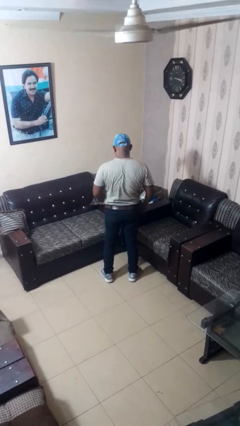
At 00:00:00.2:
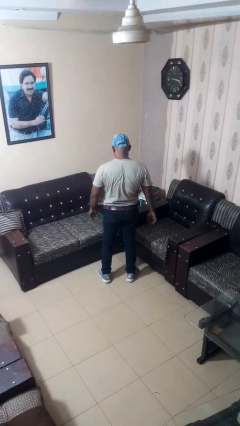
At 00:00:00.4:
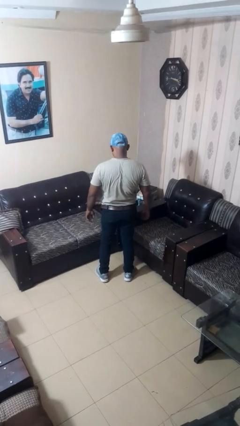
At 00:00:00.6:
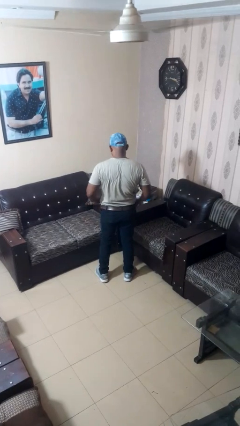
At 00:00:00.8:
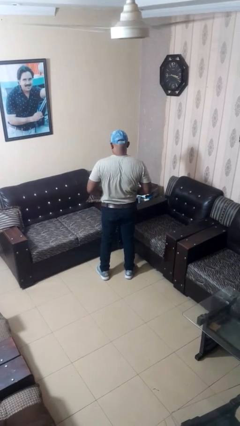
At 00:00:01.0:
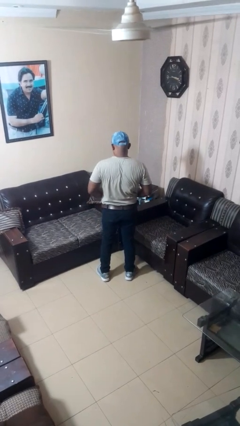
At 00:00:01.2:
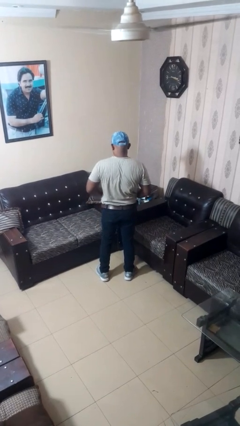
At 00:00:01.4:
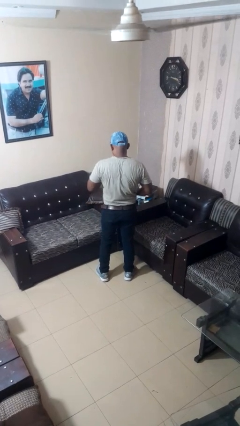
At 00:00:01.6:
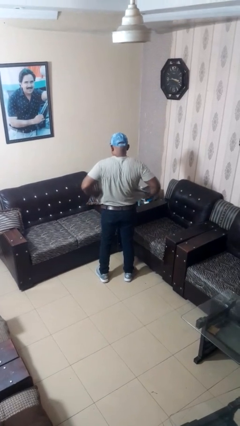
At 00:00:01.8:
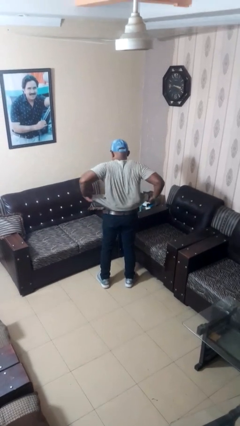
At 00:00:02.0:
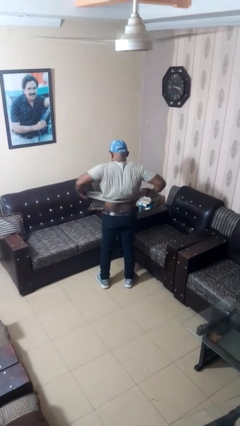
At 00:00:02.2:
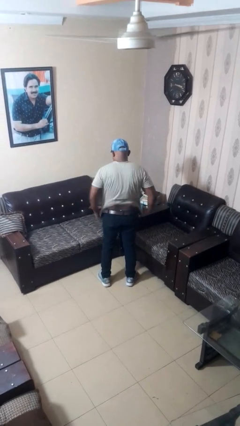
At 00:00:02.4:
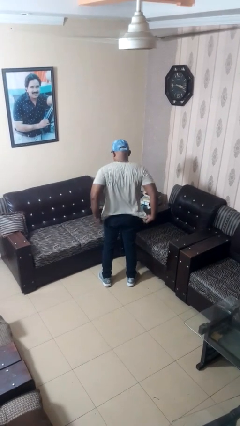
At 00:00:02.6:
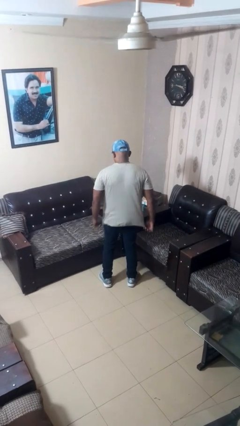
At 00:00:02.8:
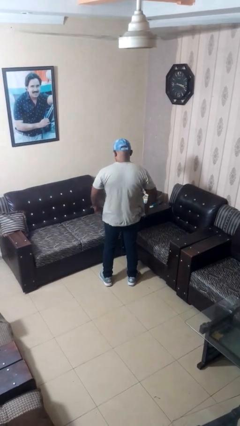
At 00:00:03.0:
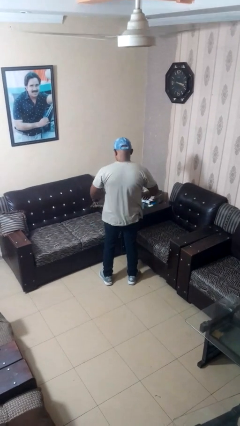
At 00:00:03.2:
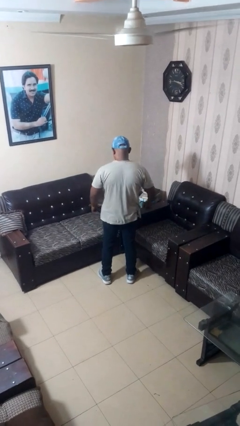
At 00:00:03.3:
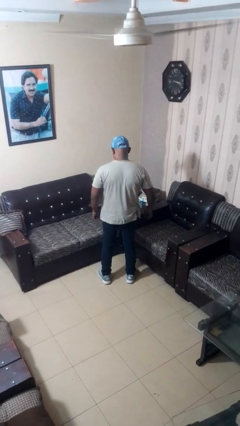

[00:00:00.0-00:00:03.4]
person untucks shirt

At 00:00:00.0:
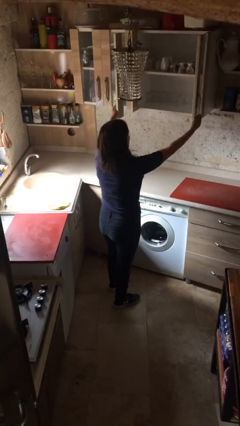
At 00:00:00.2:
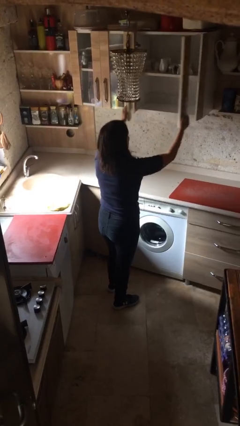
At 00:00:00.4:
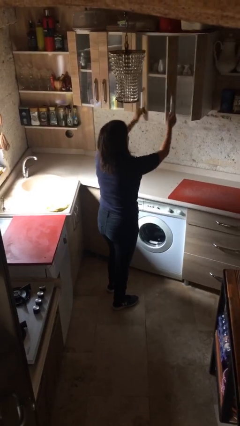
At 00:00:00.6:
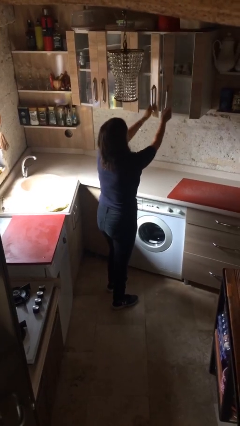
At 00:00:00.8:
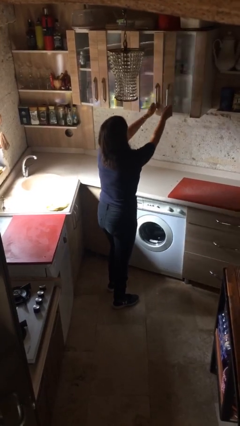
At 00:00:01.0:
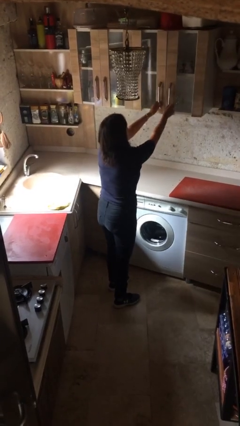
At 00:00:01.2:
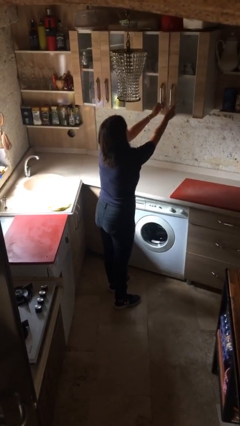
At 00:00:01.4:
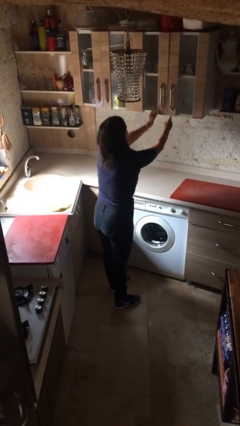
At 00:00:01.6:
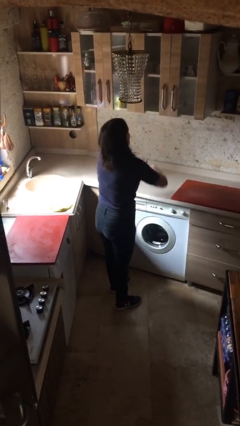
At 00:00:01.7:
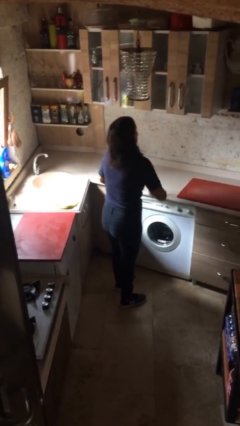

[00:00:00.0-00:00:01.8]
person closes cabinet

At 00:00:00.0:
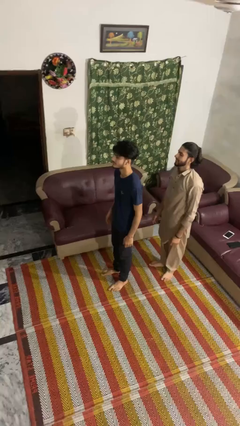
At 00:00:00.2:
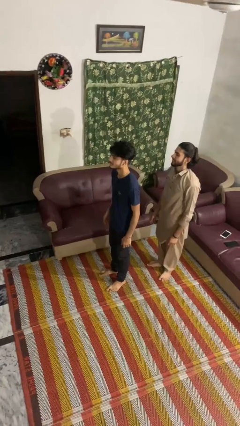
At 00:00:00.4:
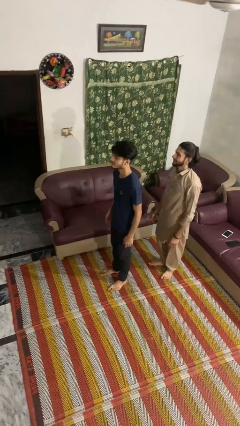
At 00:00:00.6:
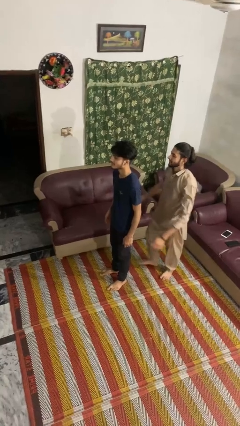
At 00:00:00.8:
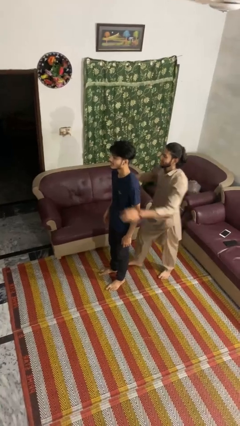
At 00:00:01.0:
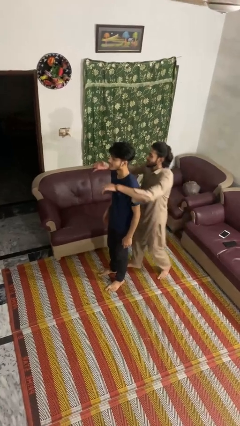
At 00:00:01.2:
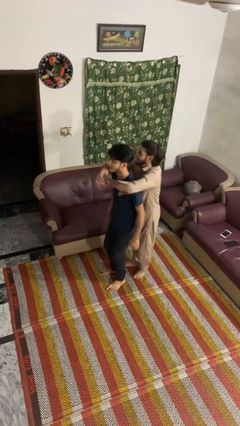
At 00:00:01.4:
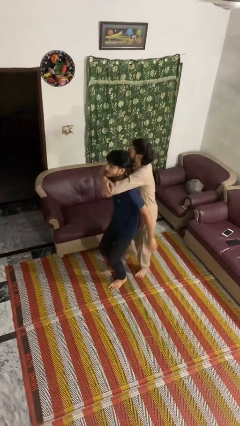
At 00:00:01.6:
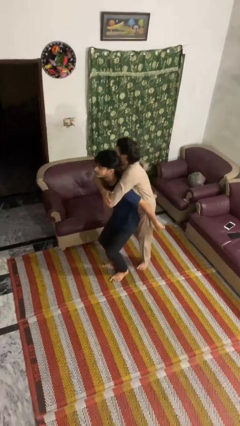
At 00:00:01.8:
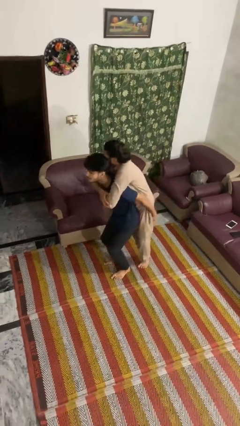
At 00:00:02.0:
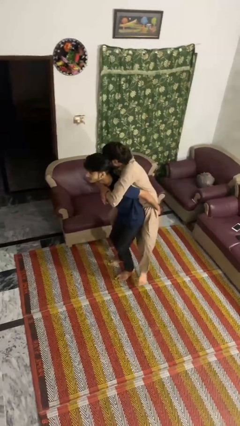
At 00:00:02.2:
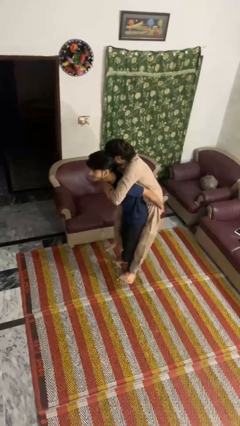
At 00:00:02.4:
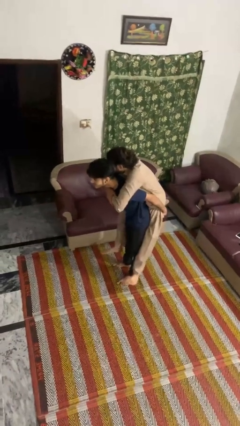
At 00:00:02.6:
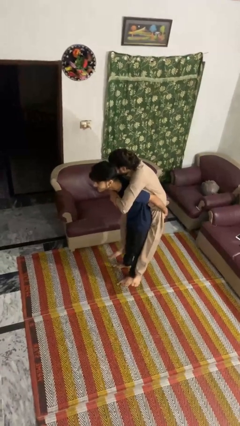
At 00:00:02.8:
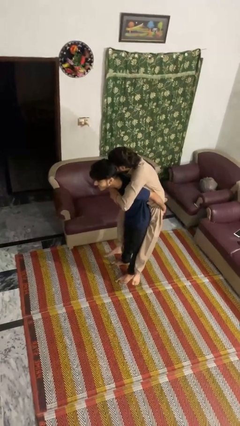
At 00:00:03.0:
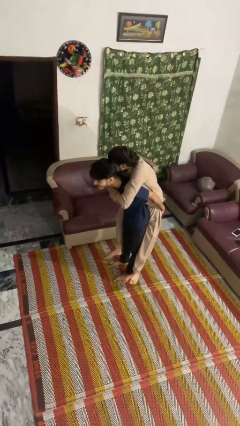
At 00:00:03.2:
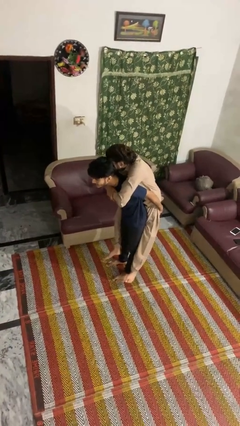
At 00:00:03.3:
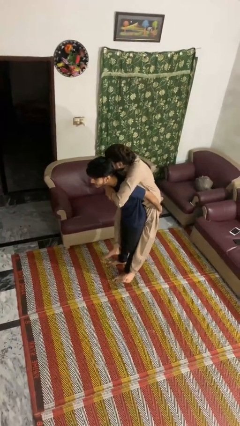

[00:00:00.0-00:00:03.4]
person carries person over shoulder

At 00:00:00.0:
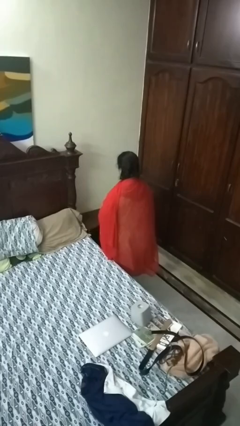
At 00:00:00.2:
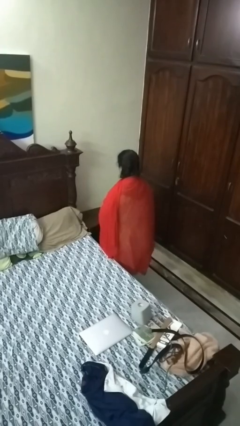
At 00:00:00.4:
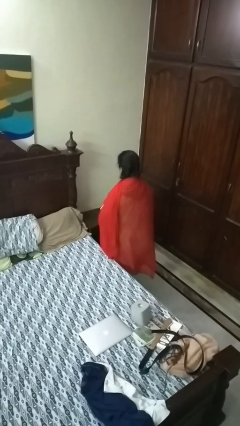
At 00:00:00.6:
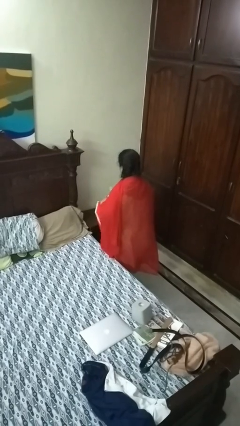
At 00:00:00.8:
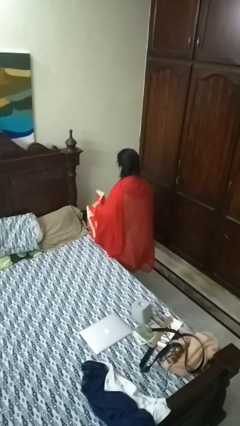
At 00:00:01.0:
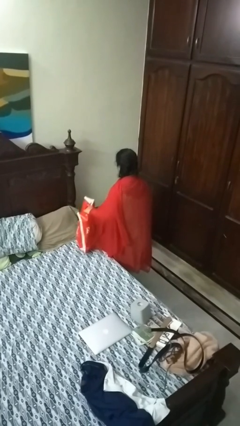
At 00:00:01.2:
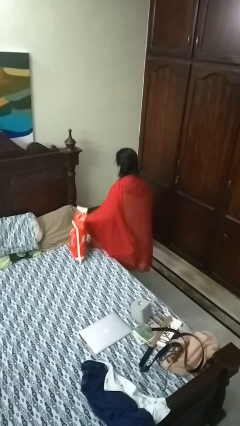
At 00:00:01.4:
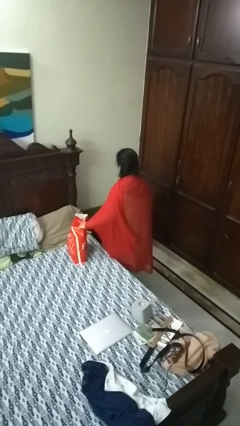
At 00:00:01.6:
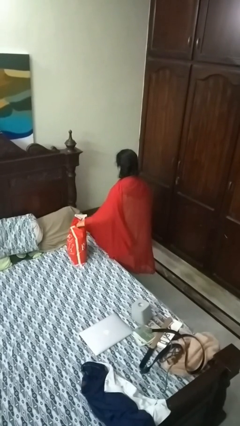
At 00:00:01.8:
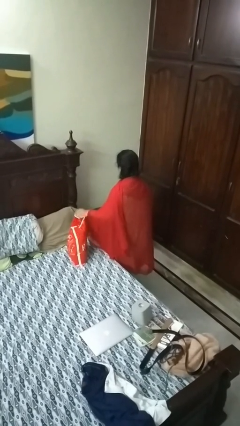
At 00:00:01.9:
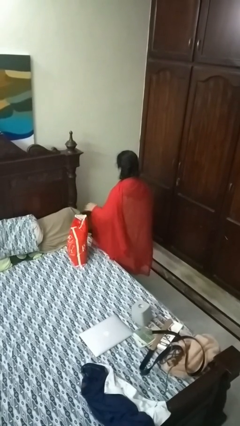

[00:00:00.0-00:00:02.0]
person puts down object on bed

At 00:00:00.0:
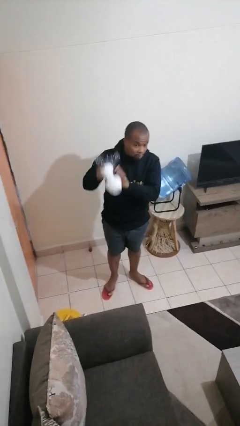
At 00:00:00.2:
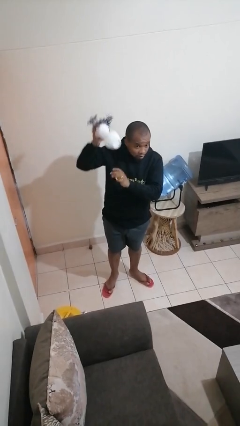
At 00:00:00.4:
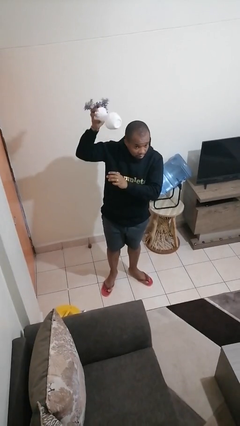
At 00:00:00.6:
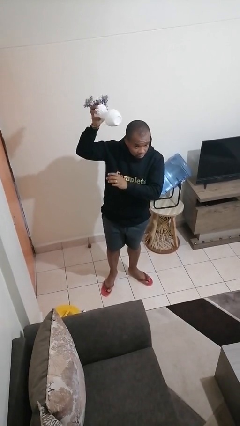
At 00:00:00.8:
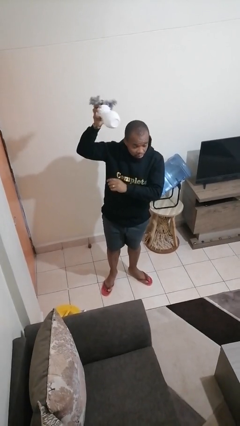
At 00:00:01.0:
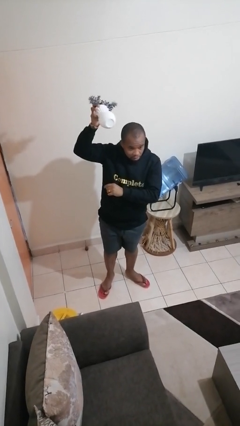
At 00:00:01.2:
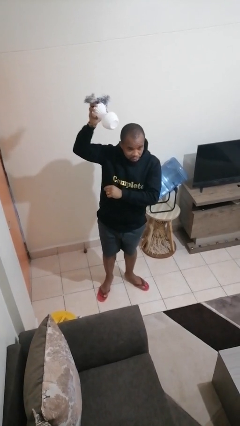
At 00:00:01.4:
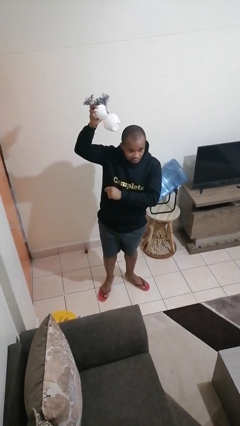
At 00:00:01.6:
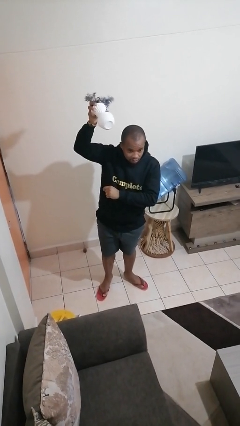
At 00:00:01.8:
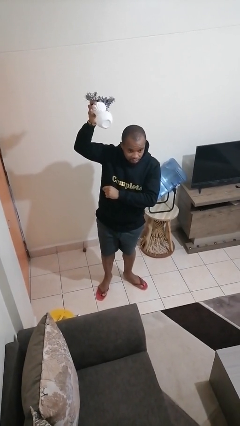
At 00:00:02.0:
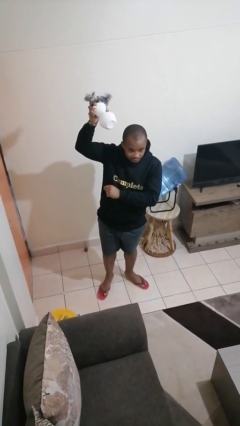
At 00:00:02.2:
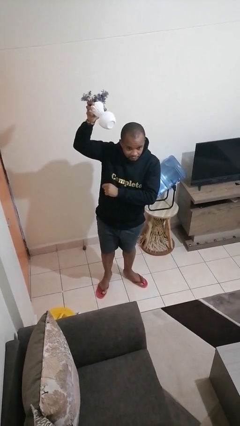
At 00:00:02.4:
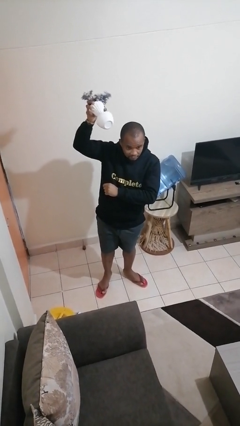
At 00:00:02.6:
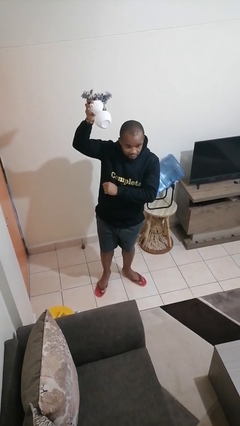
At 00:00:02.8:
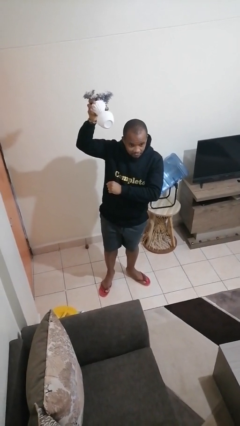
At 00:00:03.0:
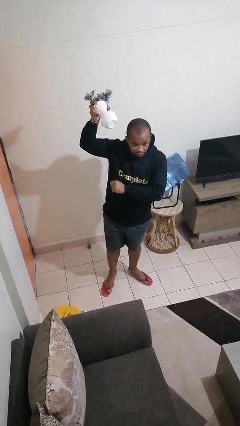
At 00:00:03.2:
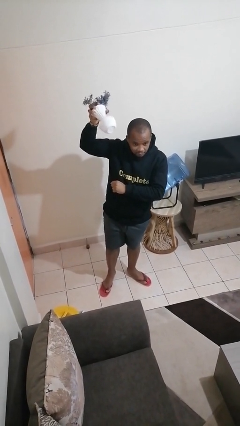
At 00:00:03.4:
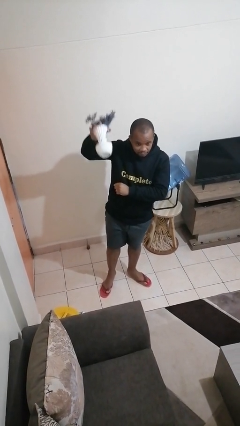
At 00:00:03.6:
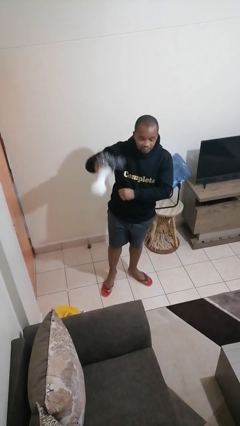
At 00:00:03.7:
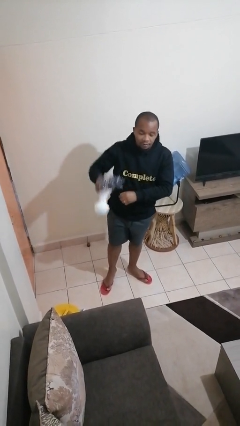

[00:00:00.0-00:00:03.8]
person holds object above head

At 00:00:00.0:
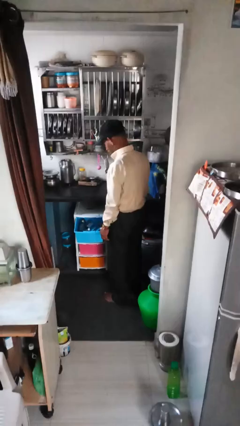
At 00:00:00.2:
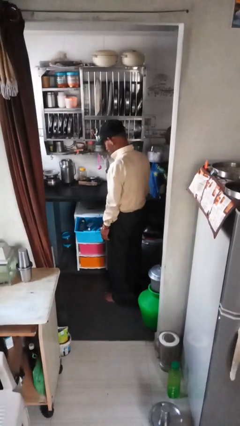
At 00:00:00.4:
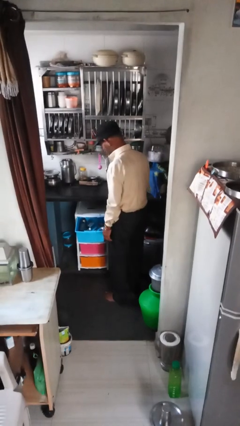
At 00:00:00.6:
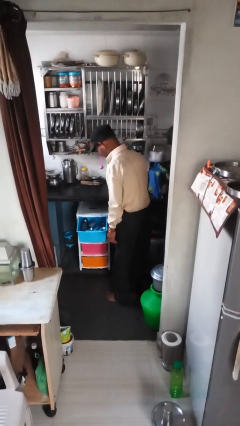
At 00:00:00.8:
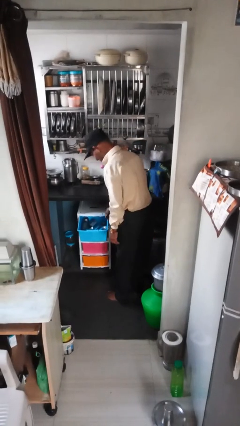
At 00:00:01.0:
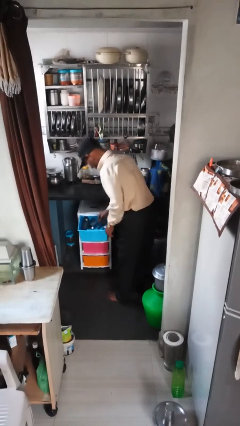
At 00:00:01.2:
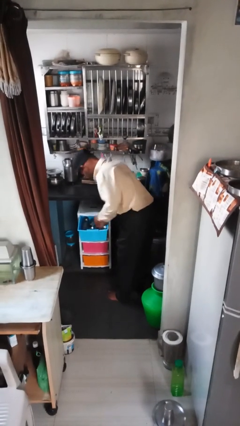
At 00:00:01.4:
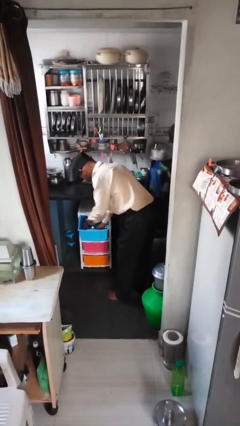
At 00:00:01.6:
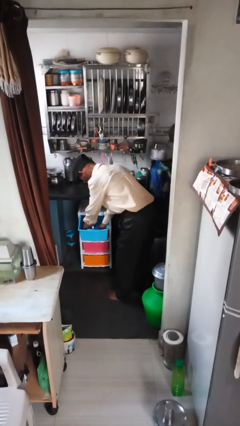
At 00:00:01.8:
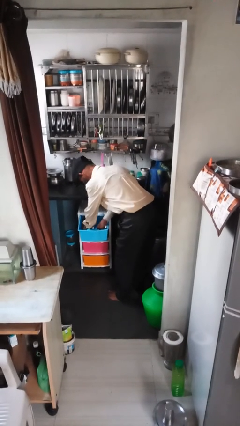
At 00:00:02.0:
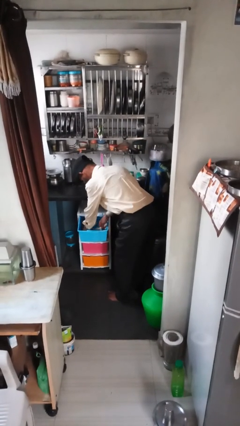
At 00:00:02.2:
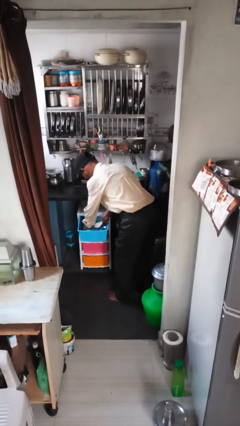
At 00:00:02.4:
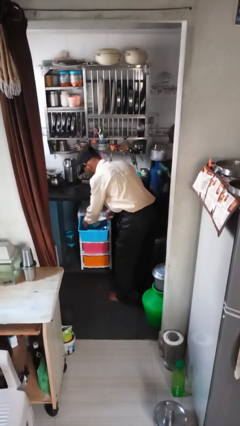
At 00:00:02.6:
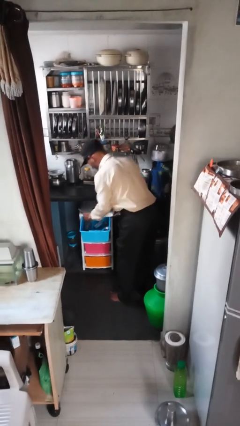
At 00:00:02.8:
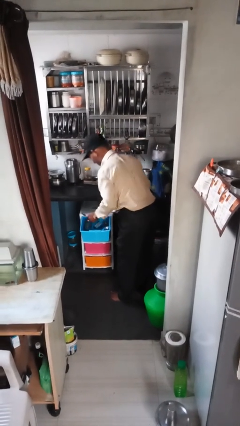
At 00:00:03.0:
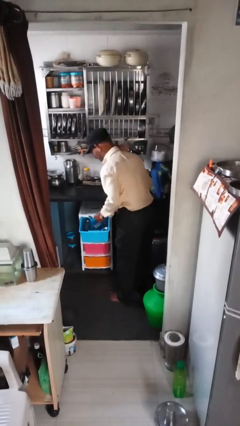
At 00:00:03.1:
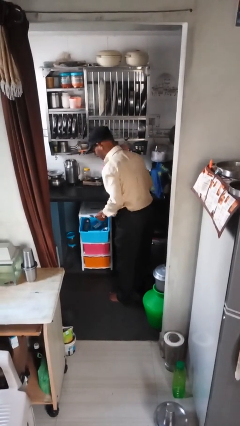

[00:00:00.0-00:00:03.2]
person takes object from kitchen drawer
